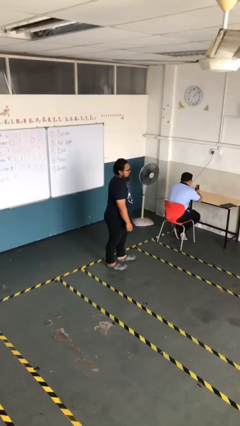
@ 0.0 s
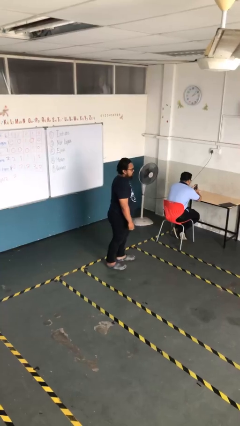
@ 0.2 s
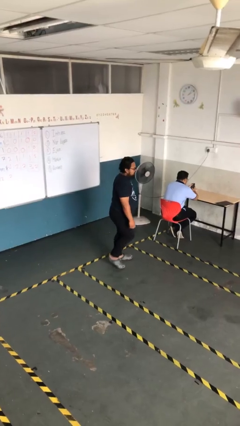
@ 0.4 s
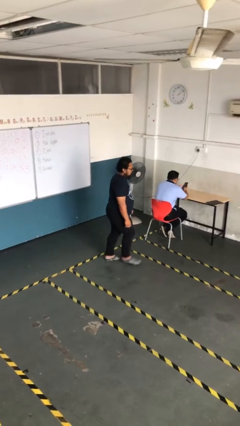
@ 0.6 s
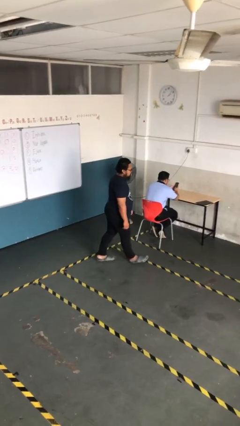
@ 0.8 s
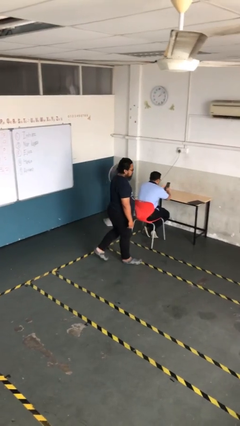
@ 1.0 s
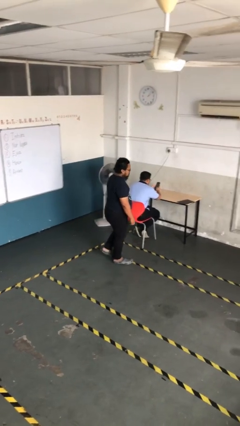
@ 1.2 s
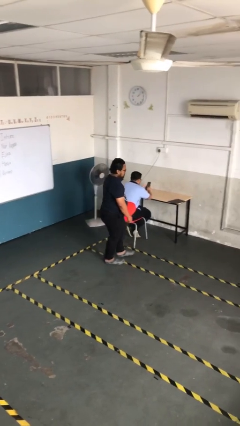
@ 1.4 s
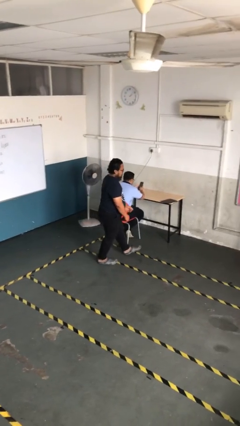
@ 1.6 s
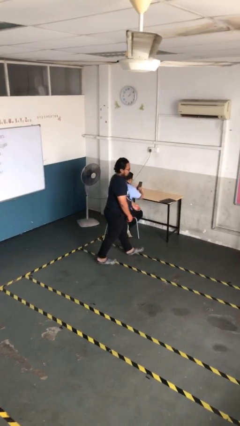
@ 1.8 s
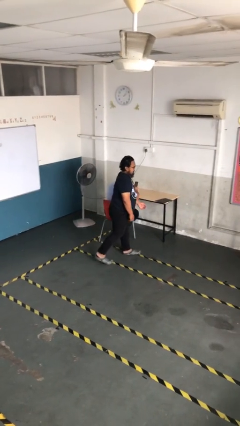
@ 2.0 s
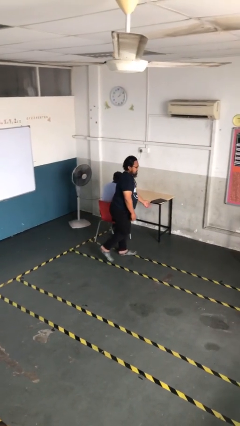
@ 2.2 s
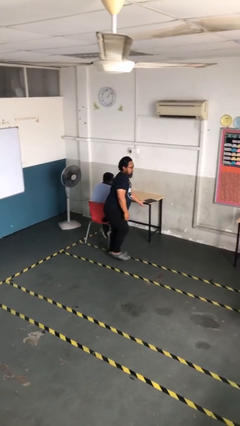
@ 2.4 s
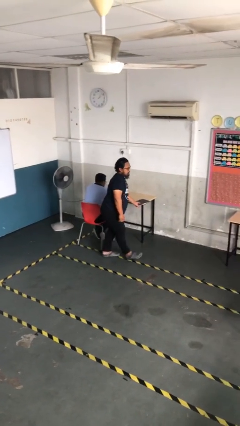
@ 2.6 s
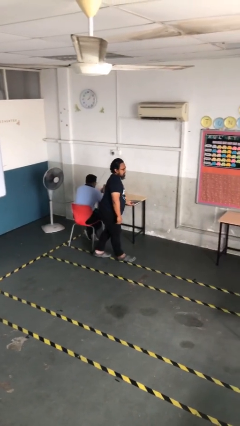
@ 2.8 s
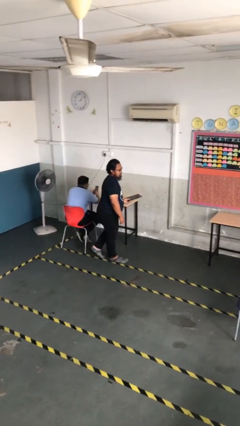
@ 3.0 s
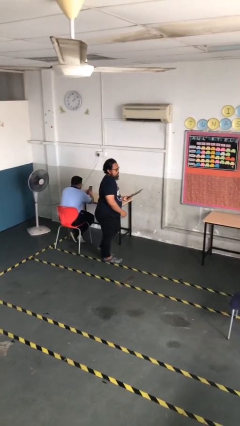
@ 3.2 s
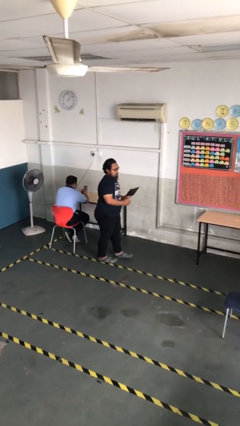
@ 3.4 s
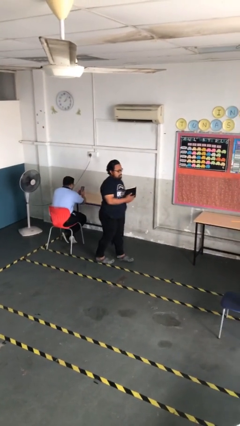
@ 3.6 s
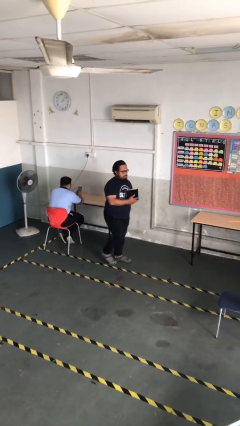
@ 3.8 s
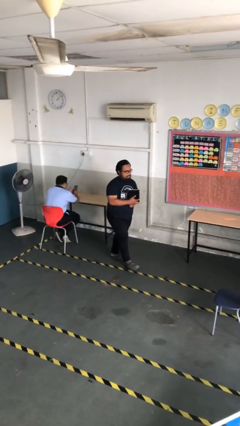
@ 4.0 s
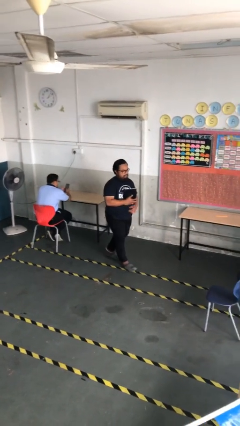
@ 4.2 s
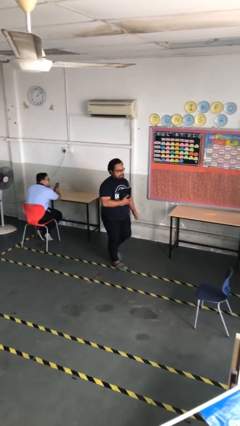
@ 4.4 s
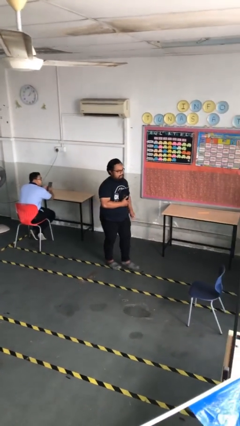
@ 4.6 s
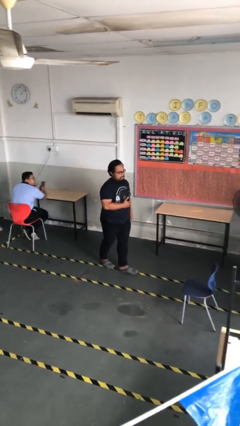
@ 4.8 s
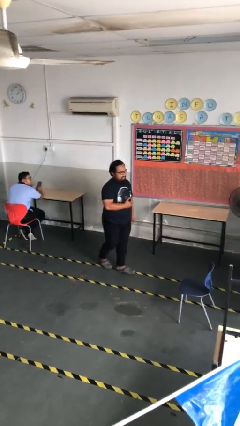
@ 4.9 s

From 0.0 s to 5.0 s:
person steals object from person

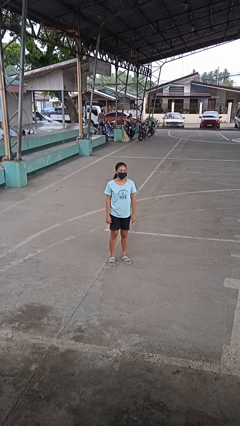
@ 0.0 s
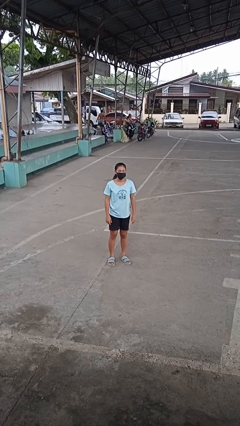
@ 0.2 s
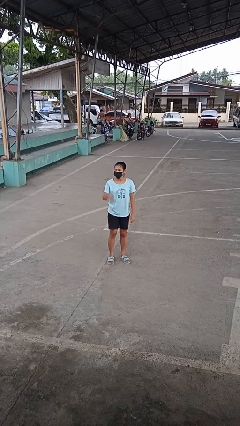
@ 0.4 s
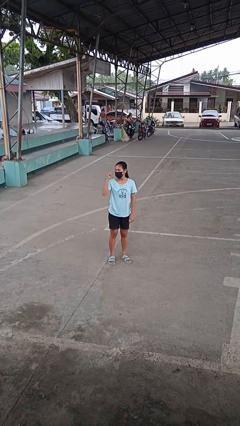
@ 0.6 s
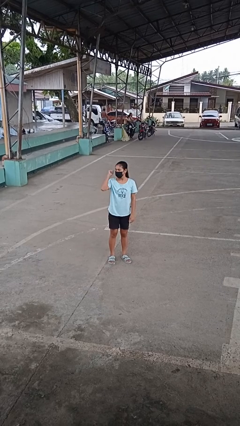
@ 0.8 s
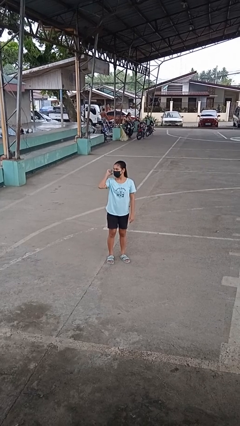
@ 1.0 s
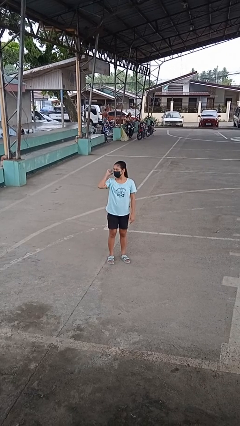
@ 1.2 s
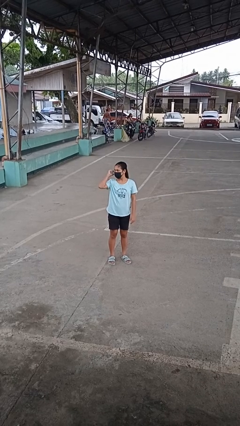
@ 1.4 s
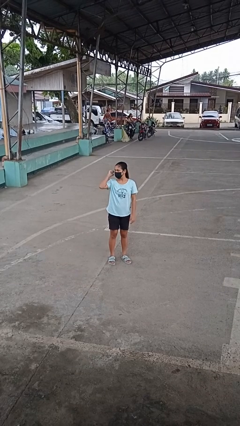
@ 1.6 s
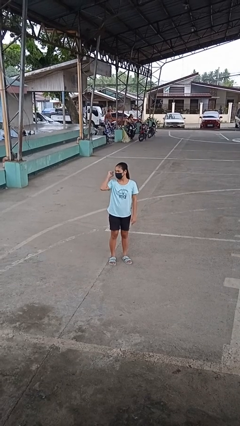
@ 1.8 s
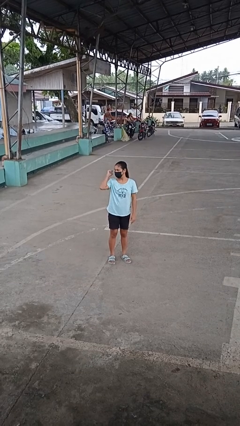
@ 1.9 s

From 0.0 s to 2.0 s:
person gestures behind me

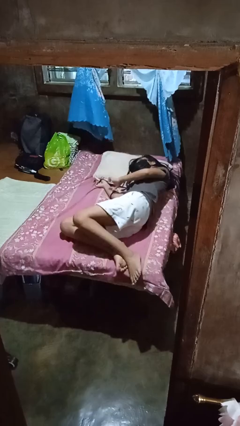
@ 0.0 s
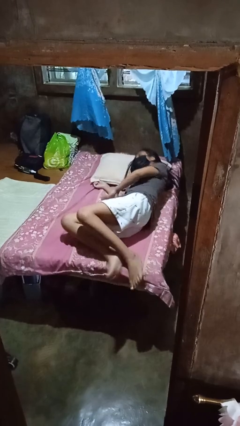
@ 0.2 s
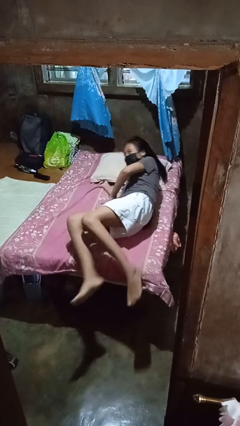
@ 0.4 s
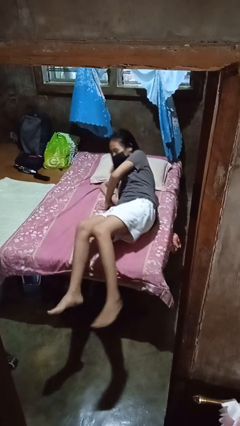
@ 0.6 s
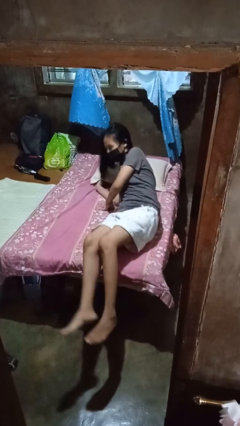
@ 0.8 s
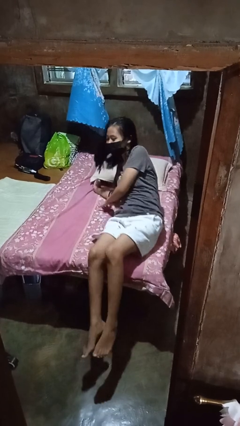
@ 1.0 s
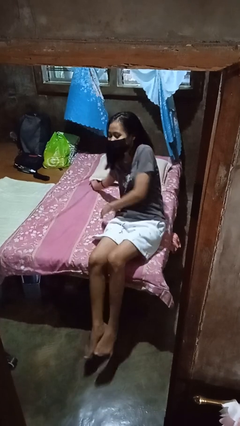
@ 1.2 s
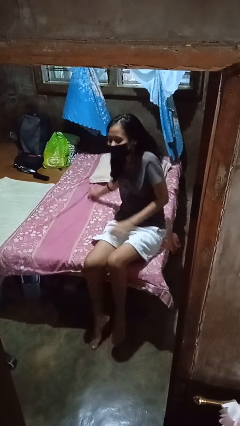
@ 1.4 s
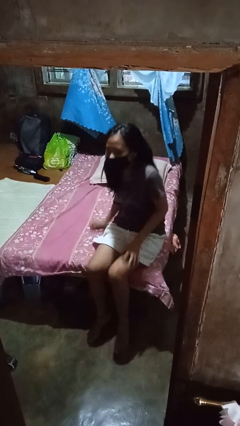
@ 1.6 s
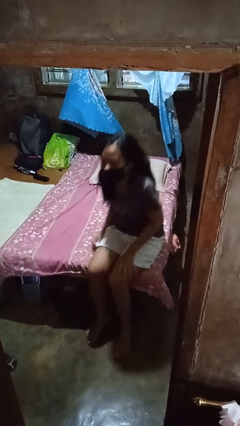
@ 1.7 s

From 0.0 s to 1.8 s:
person stands up

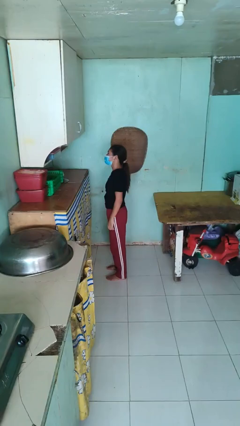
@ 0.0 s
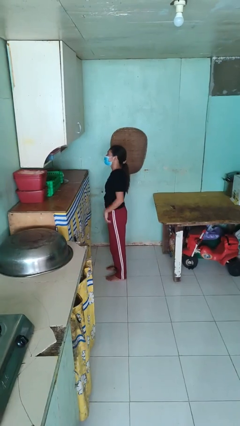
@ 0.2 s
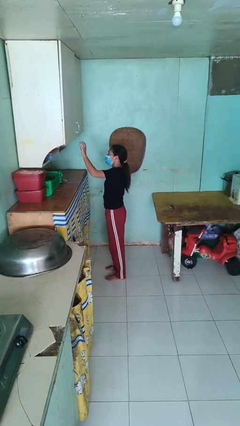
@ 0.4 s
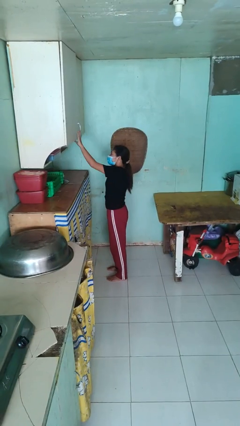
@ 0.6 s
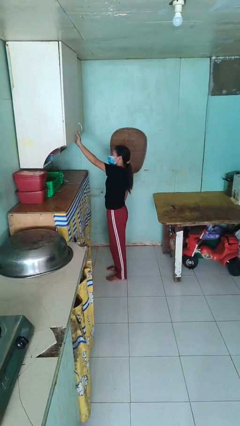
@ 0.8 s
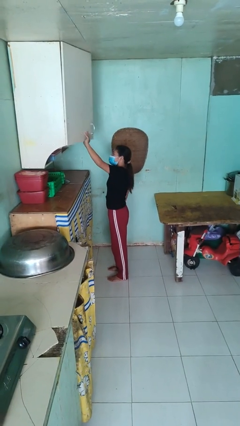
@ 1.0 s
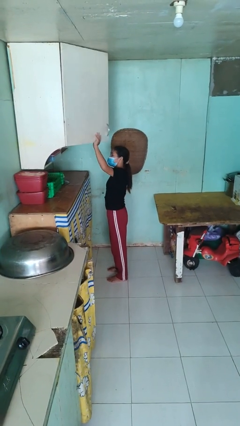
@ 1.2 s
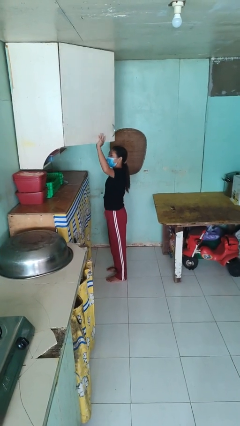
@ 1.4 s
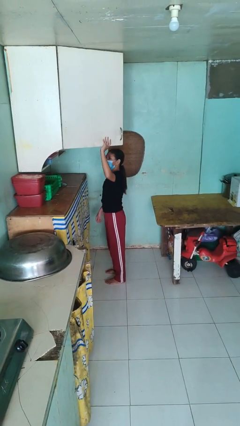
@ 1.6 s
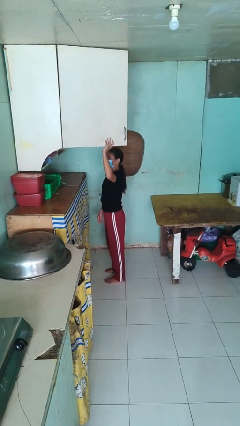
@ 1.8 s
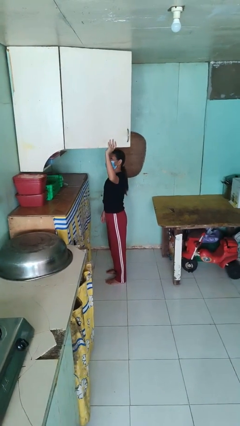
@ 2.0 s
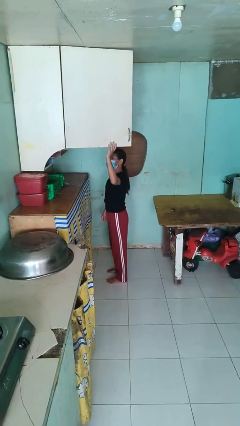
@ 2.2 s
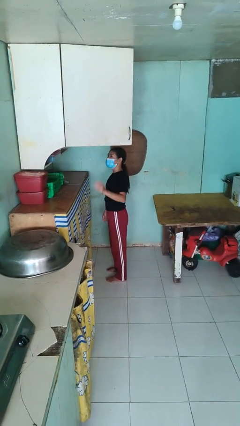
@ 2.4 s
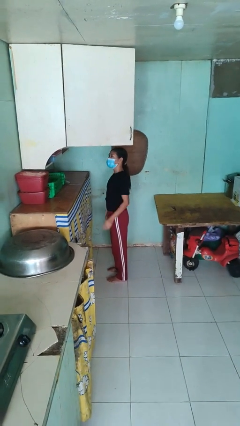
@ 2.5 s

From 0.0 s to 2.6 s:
person opens cabinet

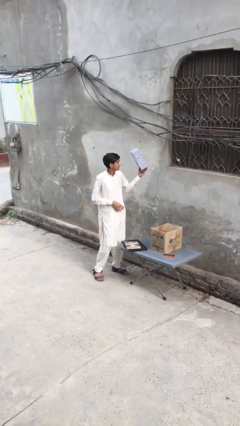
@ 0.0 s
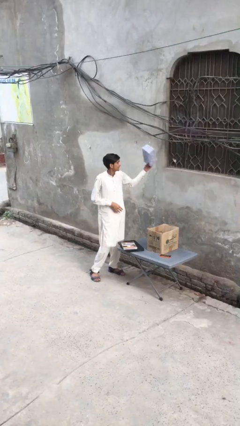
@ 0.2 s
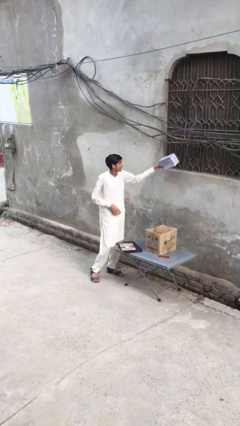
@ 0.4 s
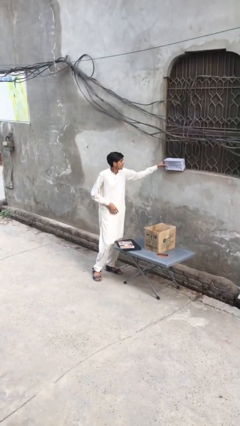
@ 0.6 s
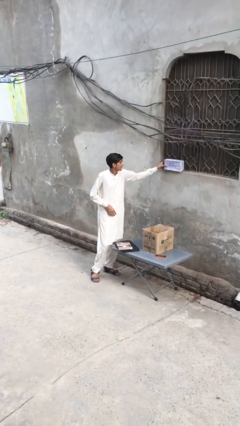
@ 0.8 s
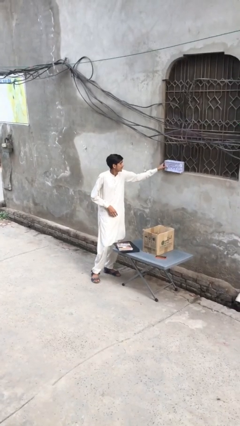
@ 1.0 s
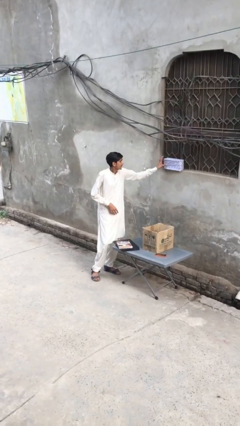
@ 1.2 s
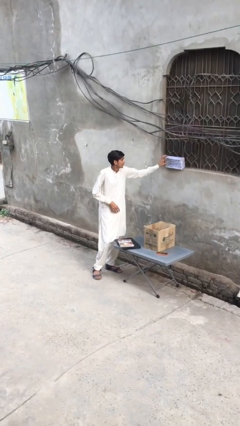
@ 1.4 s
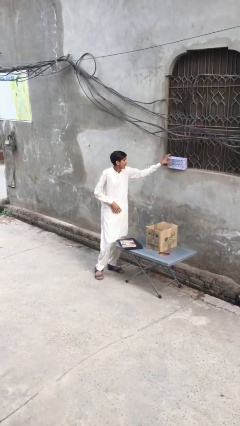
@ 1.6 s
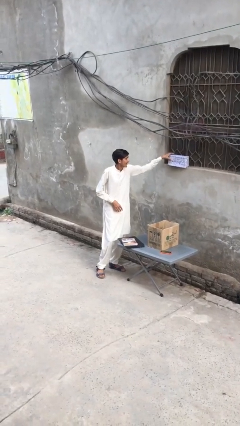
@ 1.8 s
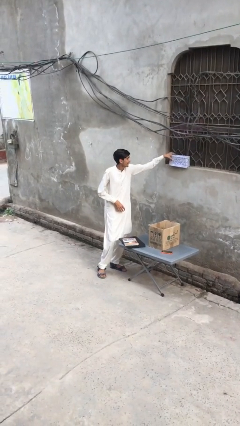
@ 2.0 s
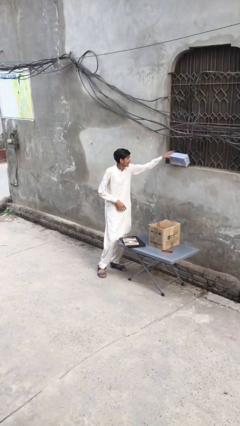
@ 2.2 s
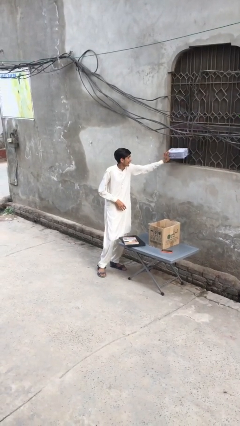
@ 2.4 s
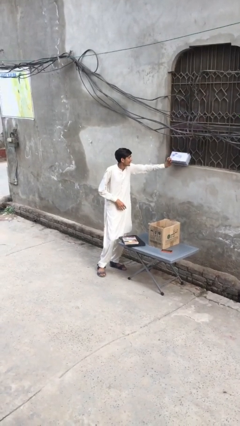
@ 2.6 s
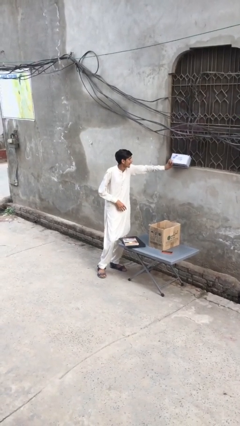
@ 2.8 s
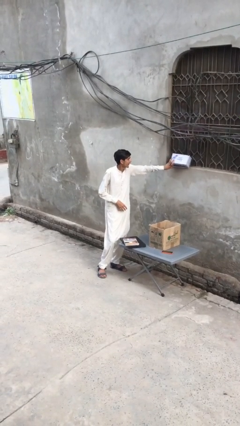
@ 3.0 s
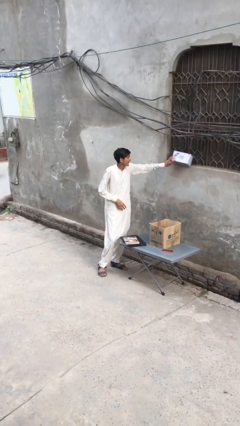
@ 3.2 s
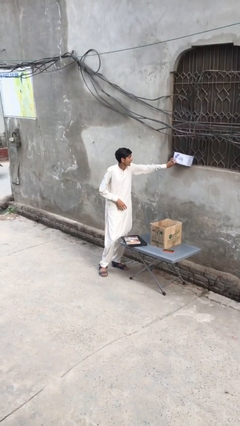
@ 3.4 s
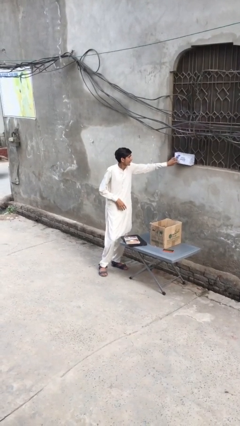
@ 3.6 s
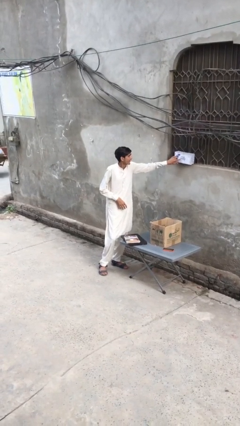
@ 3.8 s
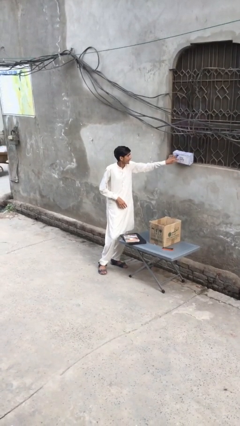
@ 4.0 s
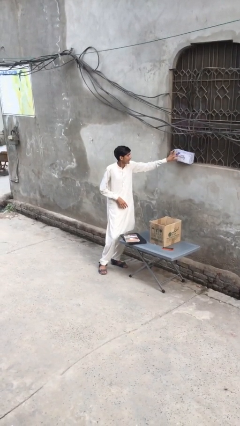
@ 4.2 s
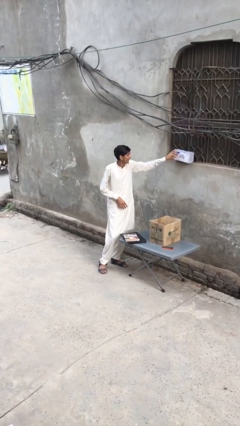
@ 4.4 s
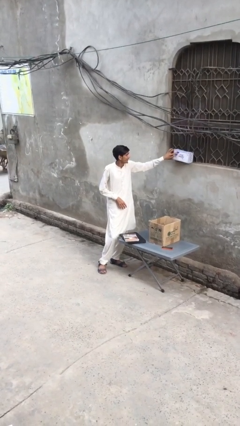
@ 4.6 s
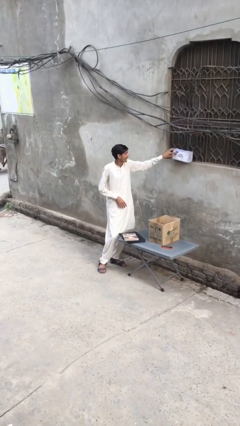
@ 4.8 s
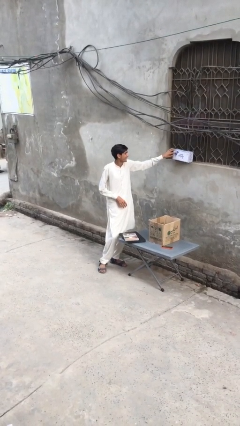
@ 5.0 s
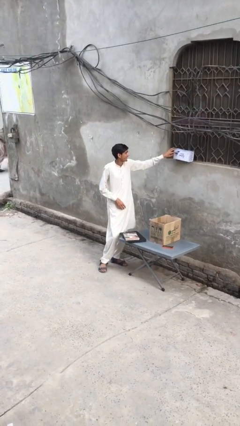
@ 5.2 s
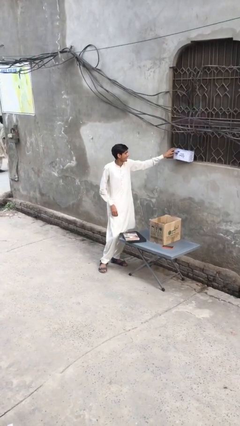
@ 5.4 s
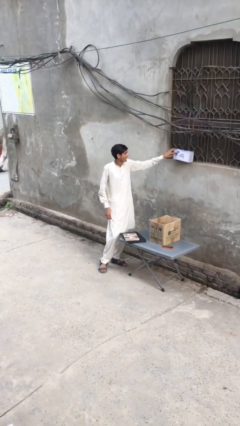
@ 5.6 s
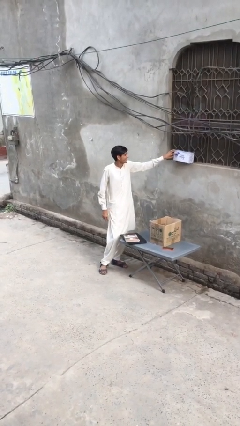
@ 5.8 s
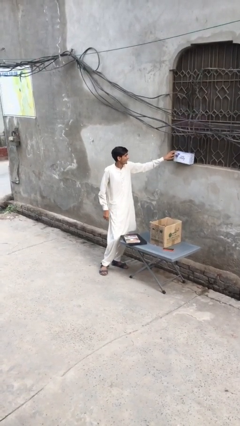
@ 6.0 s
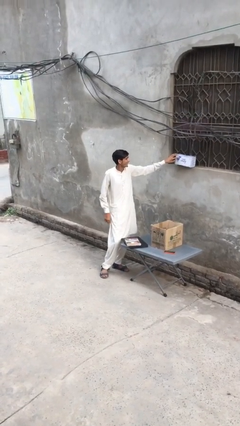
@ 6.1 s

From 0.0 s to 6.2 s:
person puts down object on shelf
